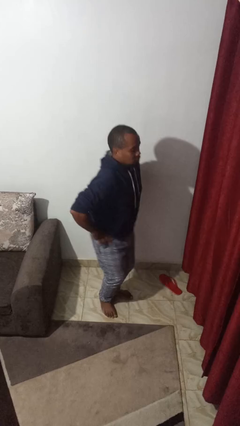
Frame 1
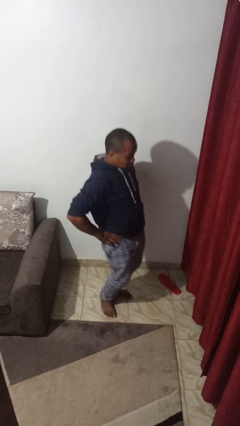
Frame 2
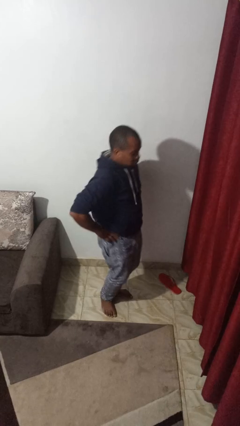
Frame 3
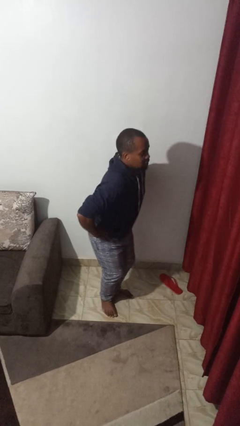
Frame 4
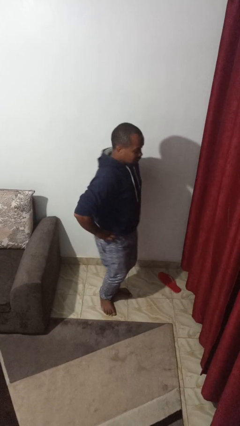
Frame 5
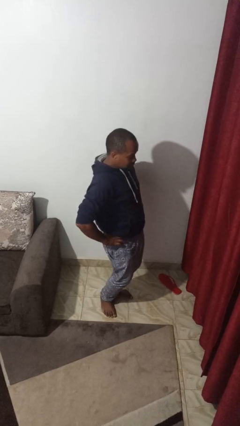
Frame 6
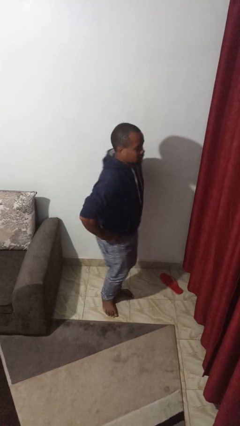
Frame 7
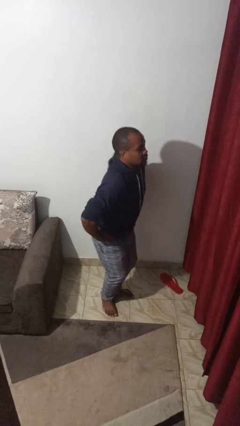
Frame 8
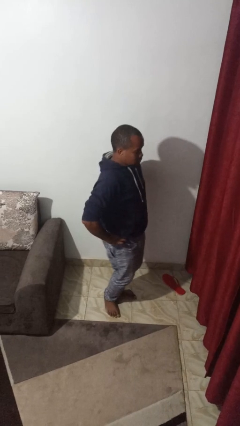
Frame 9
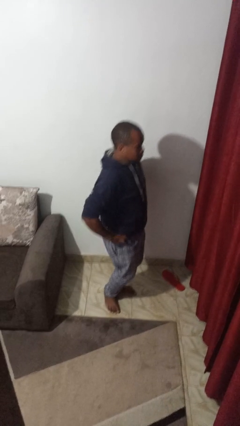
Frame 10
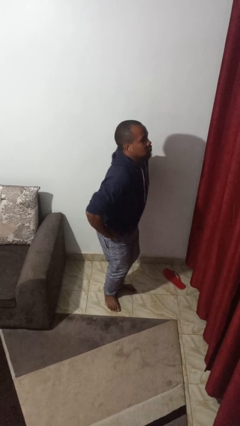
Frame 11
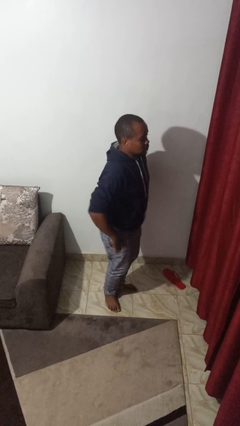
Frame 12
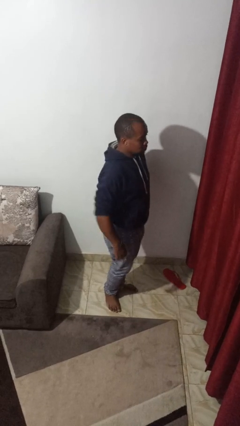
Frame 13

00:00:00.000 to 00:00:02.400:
person wiggles hips

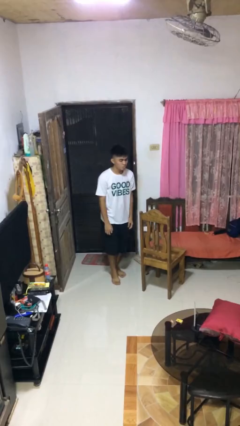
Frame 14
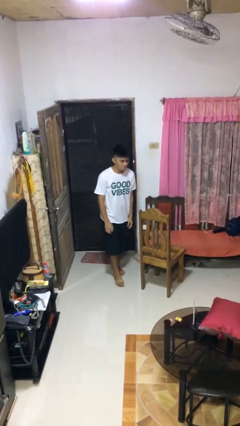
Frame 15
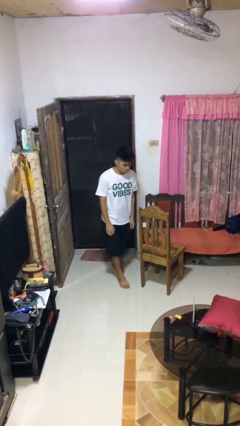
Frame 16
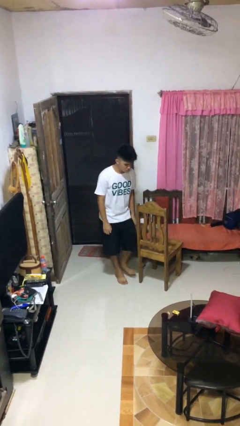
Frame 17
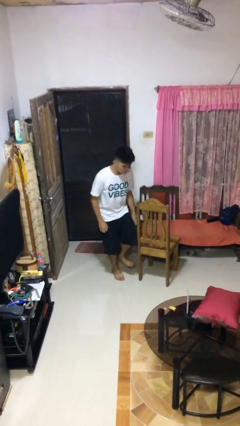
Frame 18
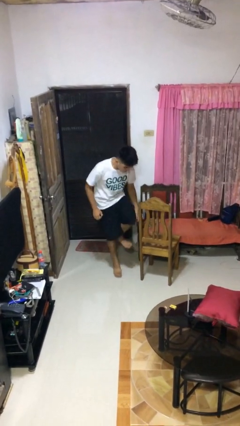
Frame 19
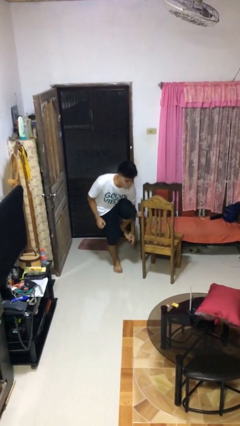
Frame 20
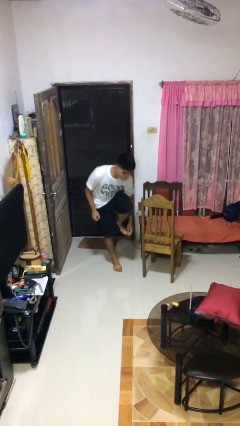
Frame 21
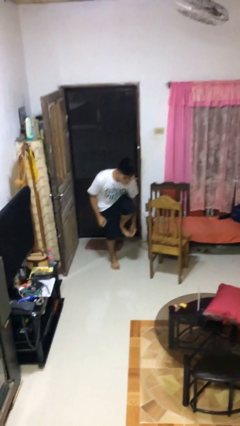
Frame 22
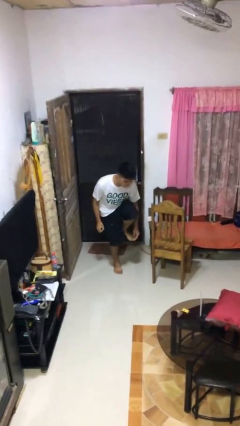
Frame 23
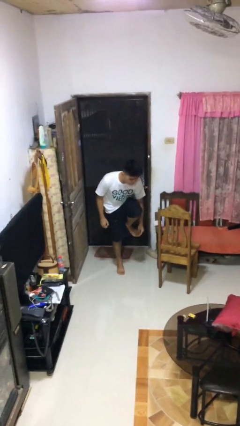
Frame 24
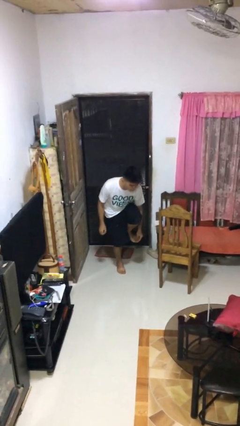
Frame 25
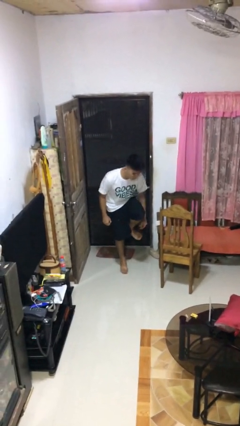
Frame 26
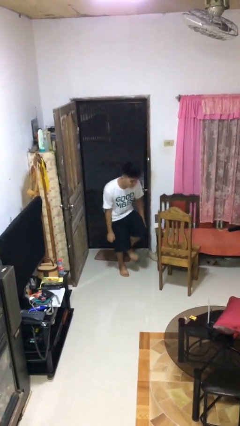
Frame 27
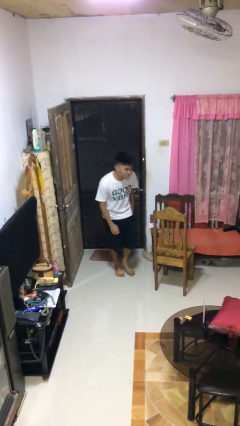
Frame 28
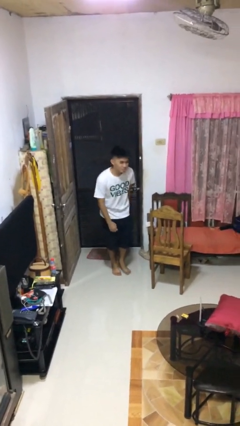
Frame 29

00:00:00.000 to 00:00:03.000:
person stubs toe

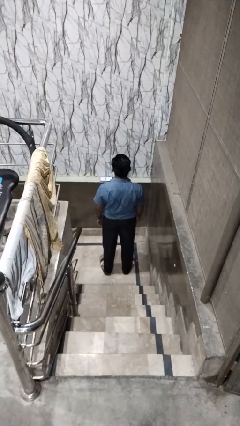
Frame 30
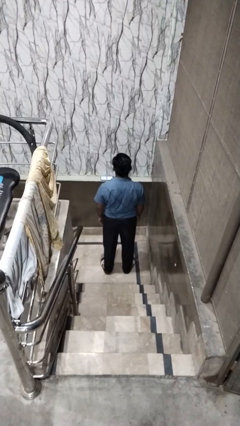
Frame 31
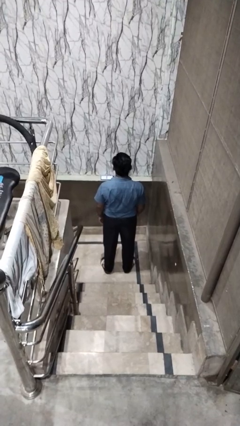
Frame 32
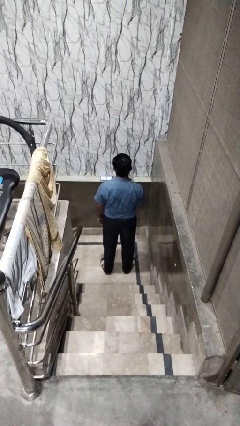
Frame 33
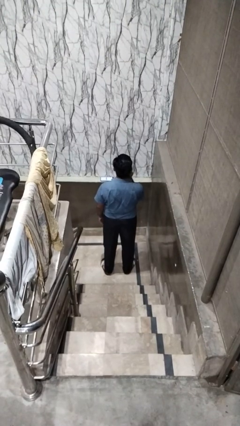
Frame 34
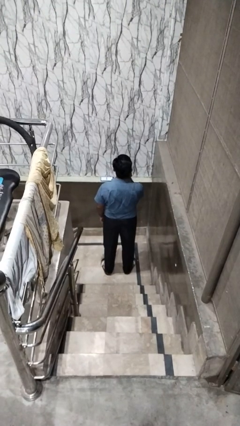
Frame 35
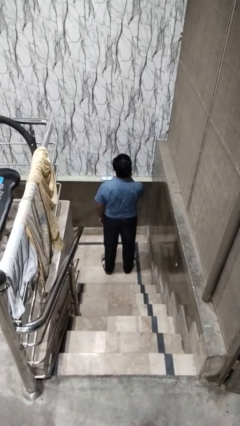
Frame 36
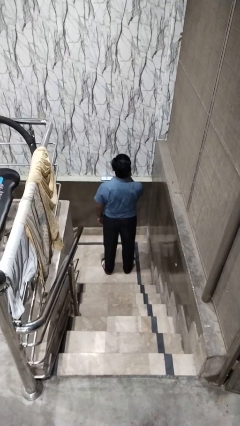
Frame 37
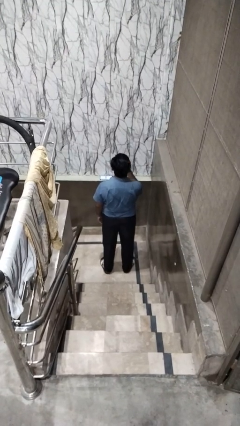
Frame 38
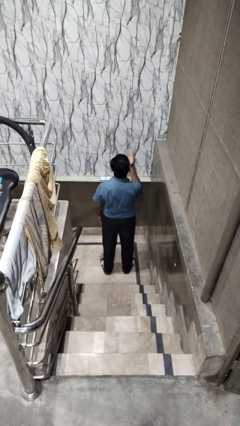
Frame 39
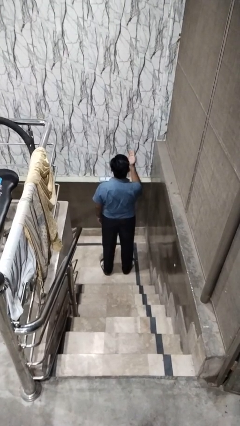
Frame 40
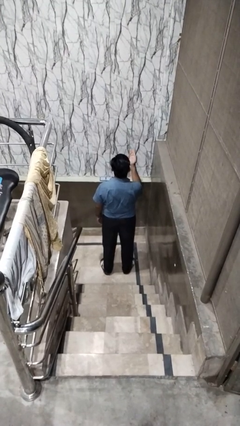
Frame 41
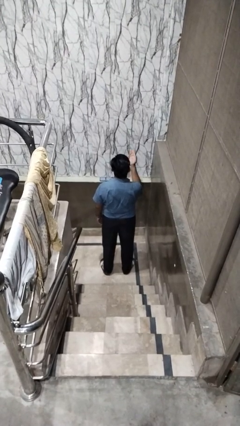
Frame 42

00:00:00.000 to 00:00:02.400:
person gestures blow kiss

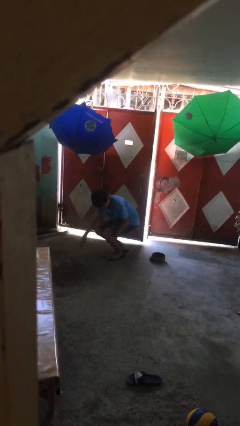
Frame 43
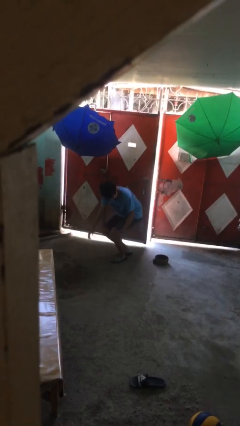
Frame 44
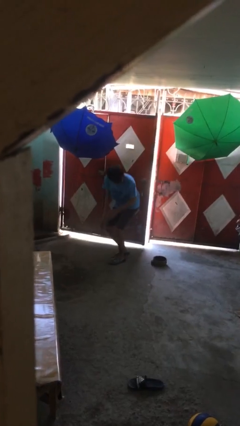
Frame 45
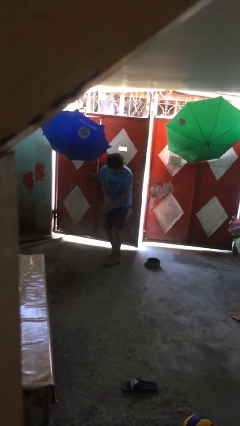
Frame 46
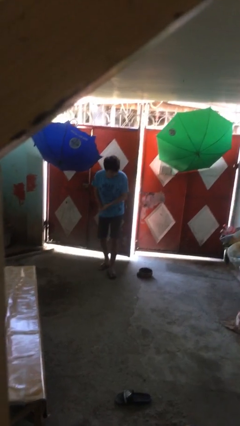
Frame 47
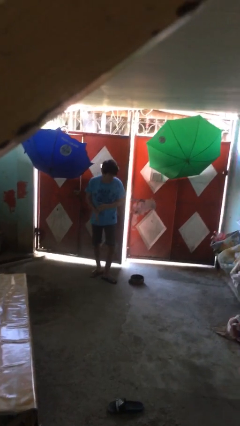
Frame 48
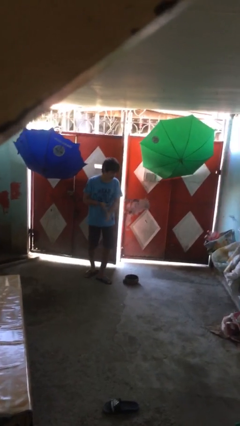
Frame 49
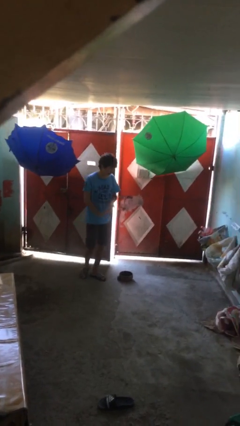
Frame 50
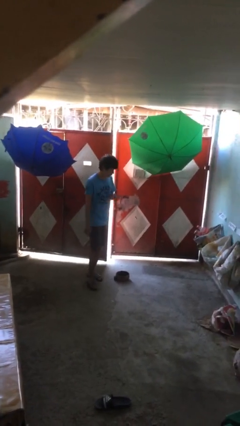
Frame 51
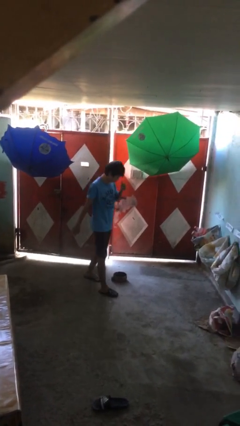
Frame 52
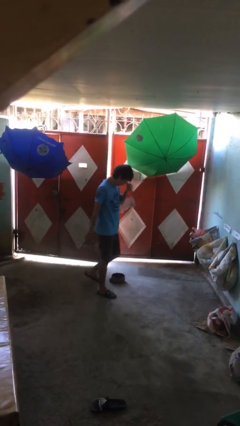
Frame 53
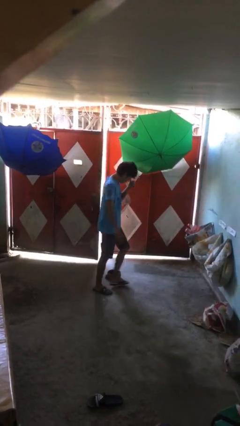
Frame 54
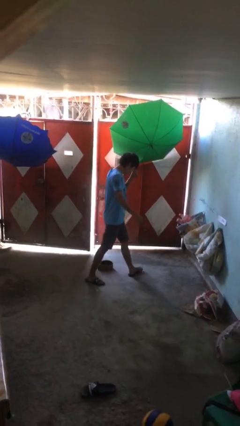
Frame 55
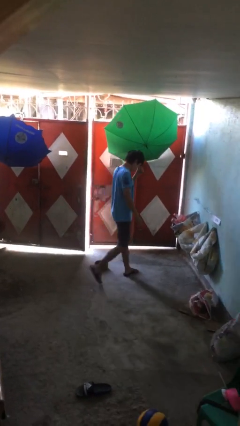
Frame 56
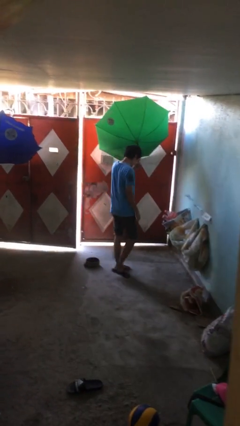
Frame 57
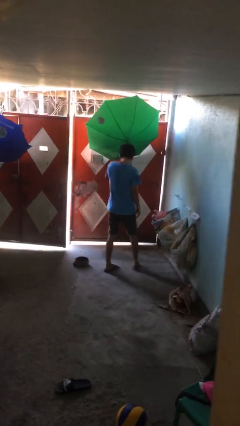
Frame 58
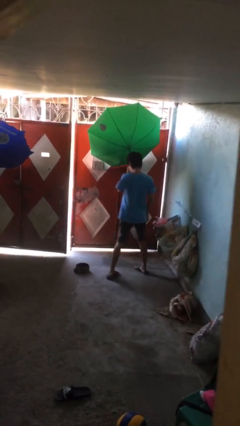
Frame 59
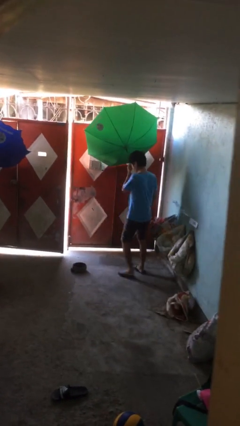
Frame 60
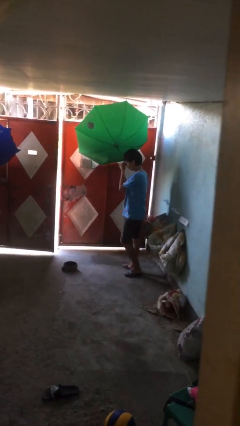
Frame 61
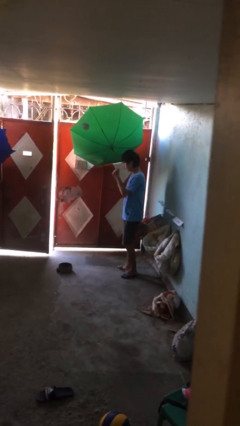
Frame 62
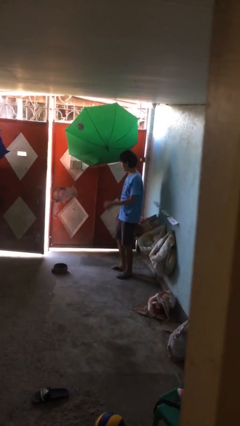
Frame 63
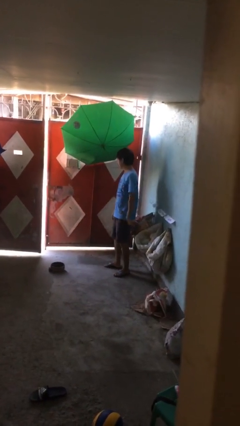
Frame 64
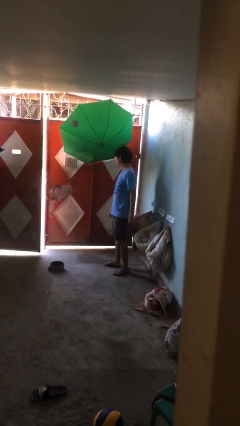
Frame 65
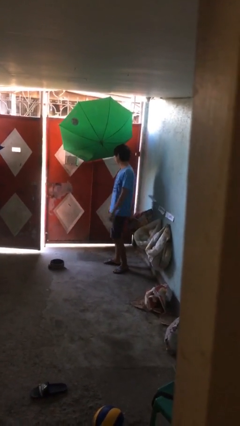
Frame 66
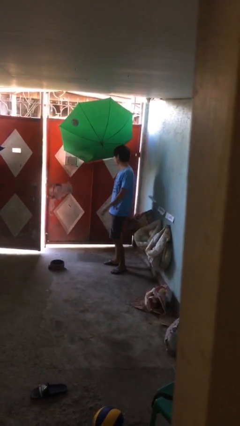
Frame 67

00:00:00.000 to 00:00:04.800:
person stands up from floor

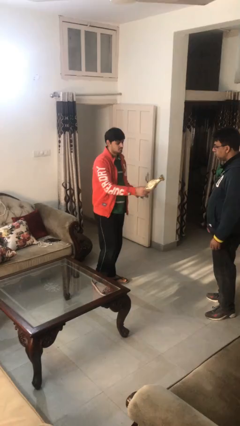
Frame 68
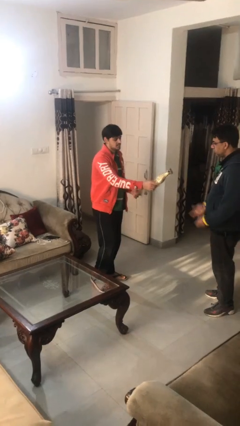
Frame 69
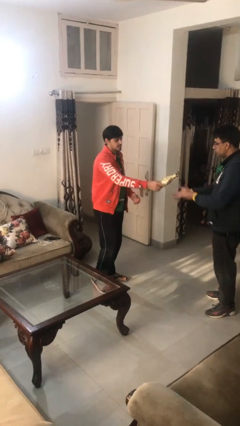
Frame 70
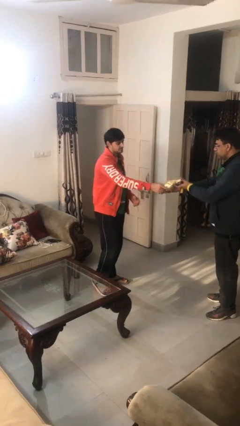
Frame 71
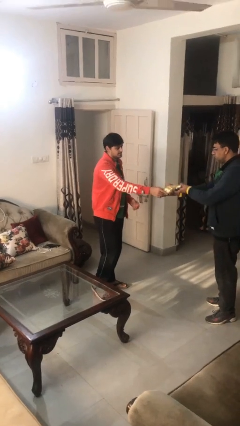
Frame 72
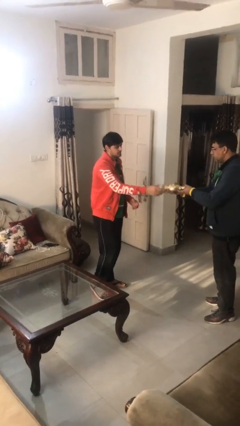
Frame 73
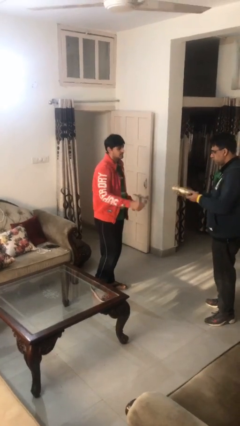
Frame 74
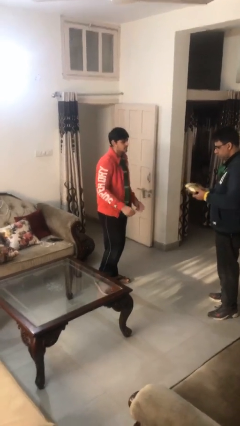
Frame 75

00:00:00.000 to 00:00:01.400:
person transfers object to person

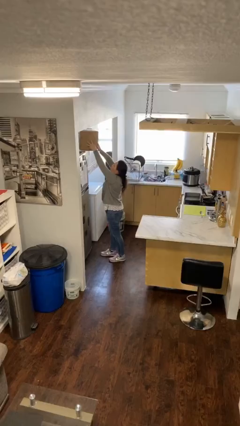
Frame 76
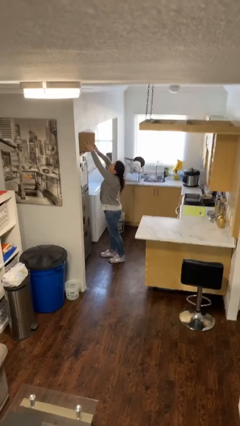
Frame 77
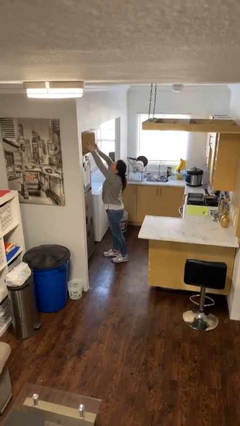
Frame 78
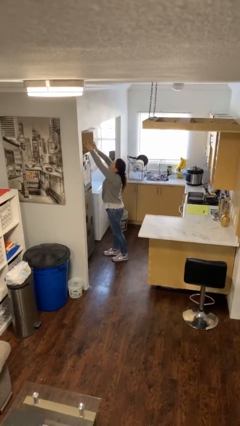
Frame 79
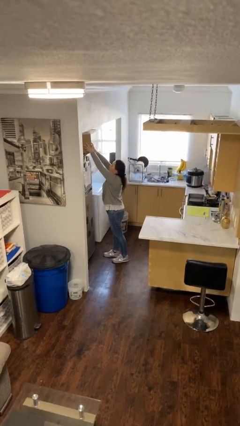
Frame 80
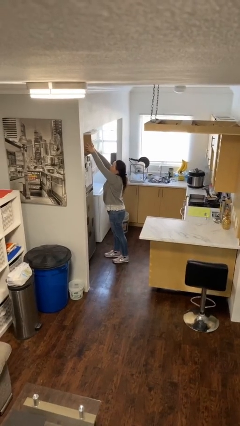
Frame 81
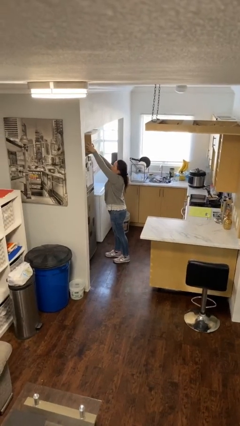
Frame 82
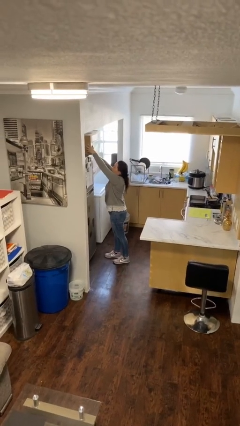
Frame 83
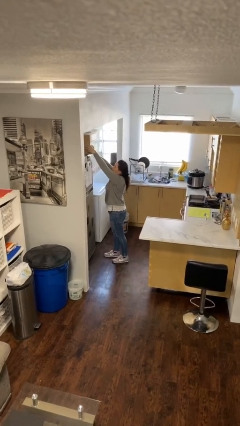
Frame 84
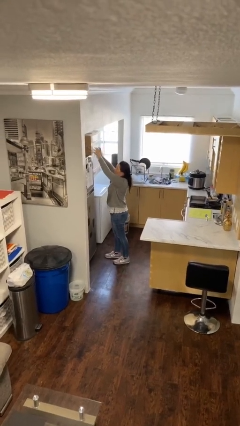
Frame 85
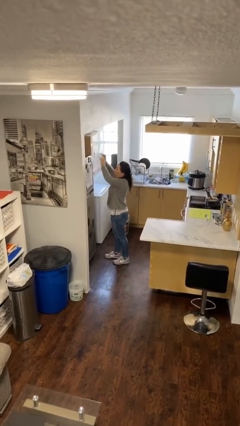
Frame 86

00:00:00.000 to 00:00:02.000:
person puts down object on shelf

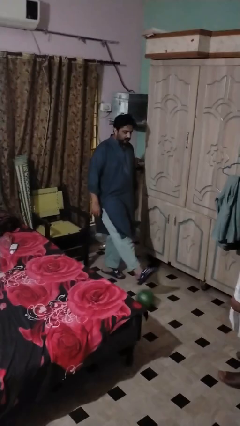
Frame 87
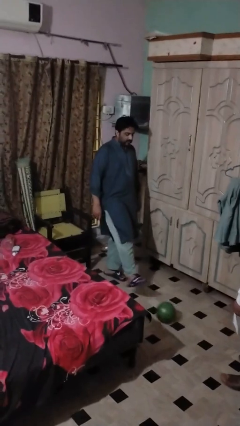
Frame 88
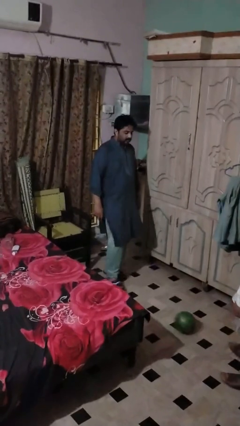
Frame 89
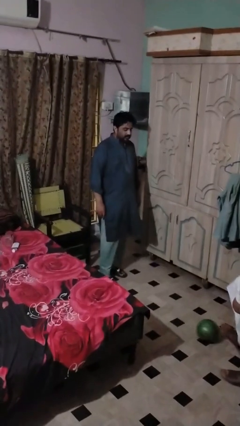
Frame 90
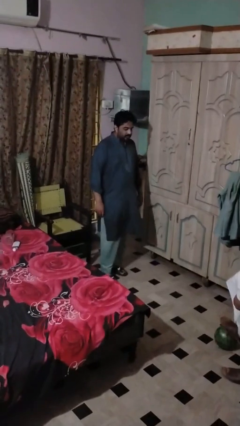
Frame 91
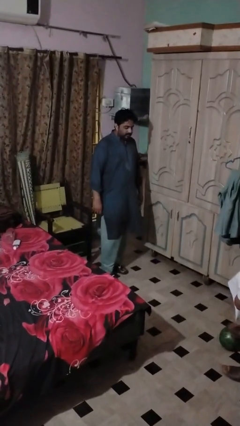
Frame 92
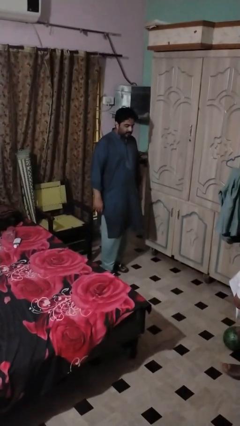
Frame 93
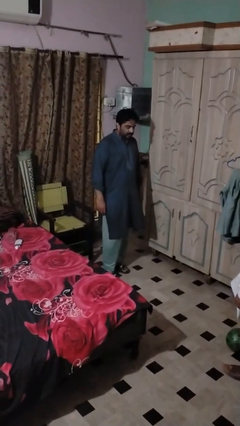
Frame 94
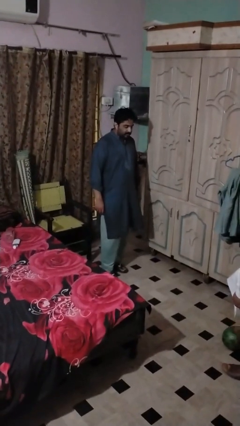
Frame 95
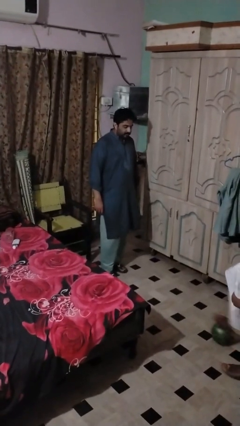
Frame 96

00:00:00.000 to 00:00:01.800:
person kicks object to person
